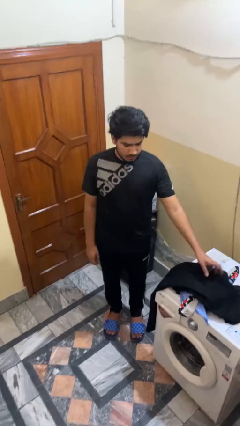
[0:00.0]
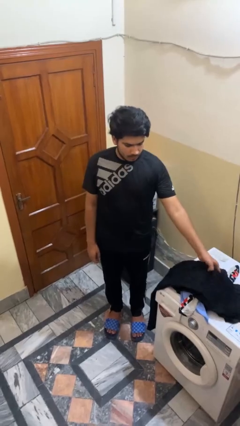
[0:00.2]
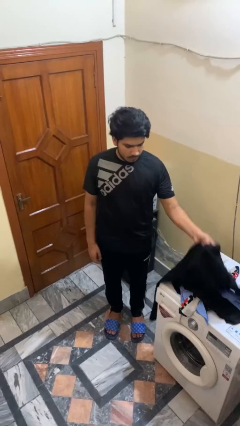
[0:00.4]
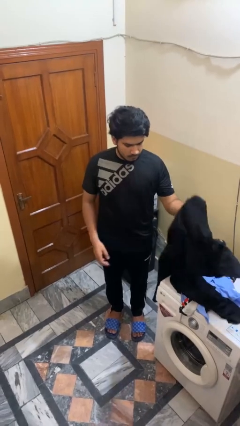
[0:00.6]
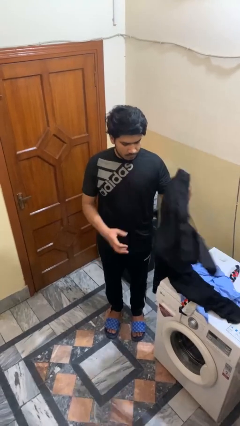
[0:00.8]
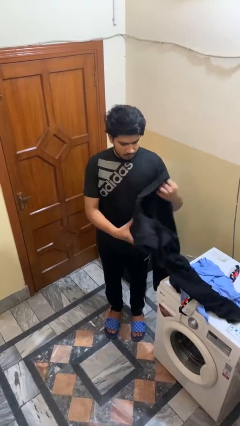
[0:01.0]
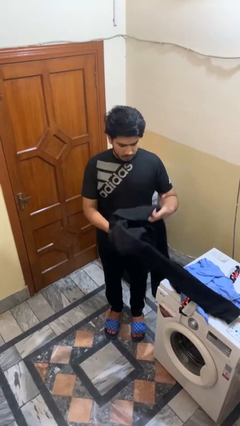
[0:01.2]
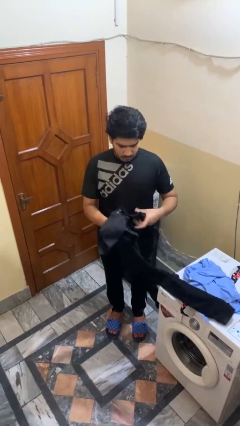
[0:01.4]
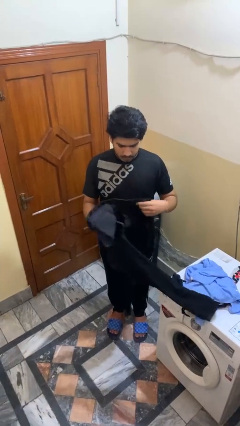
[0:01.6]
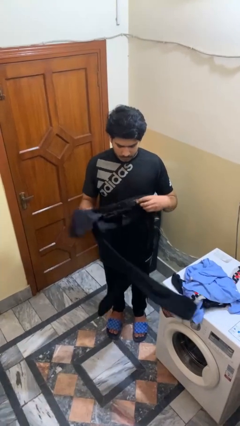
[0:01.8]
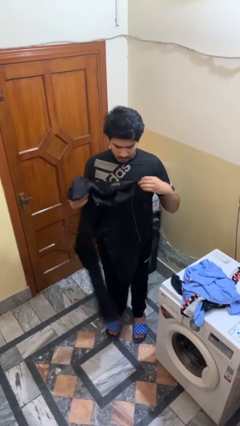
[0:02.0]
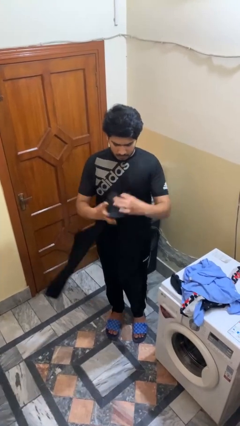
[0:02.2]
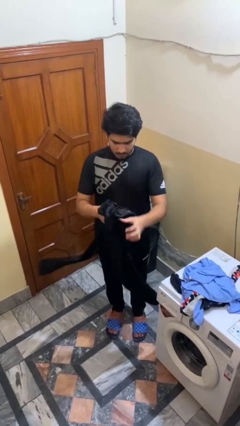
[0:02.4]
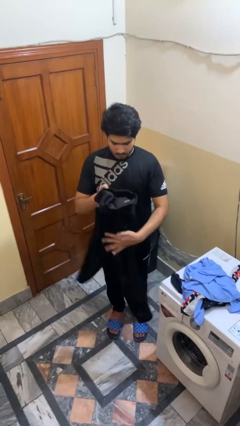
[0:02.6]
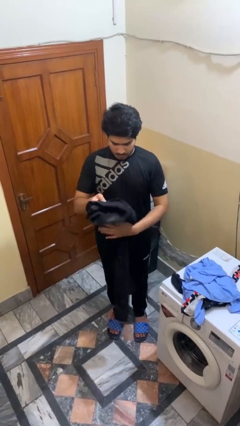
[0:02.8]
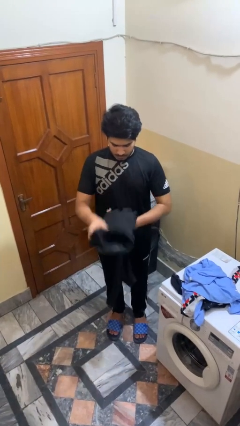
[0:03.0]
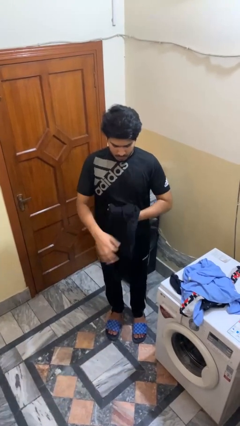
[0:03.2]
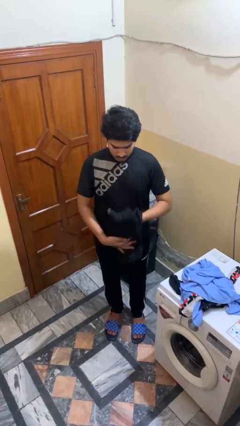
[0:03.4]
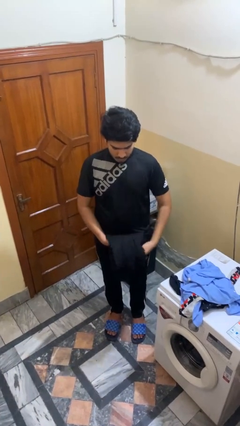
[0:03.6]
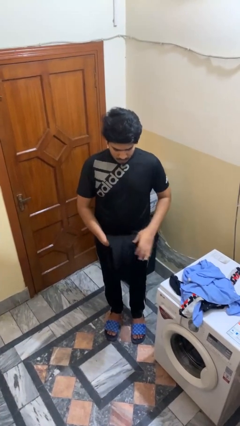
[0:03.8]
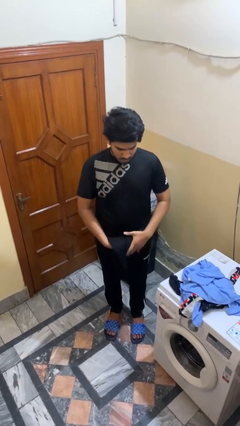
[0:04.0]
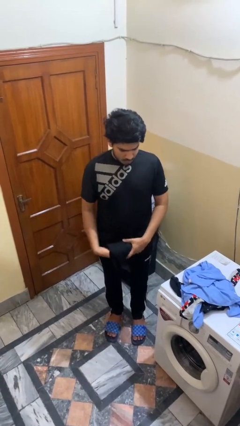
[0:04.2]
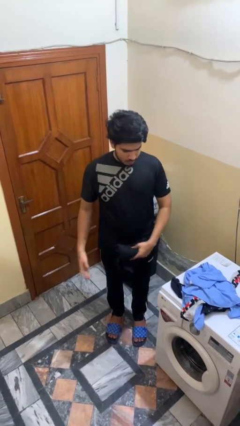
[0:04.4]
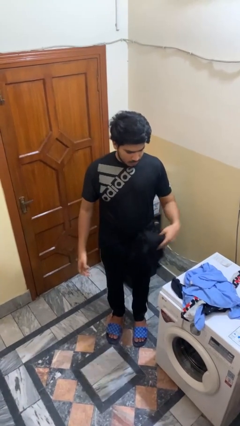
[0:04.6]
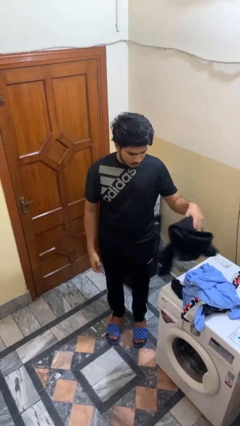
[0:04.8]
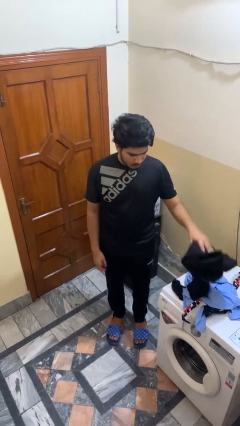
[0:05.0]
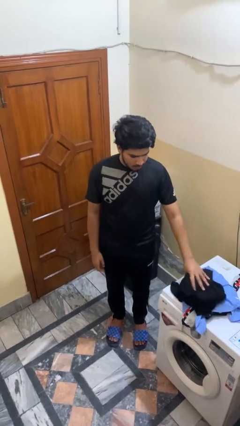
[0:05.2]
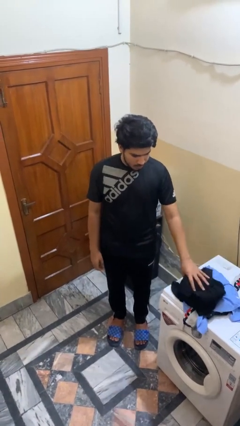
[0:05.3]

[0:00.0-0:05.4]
person folds pants

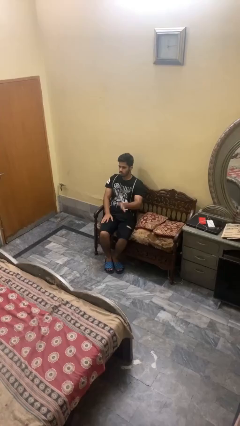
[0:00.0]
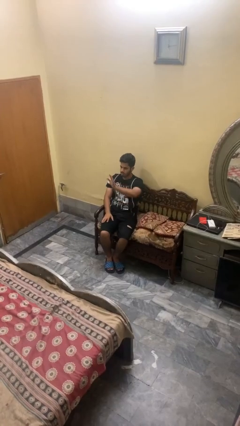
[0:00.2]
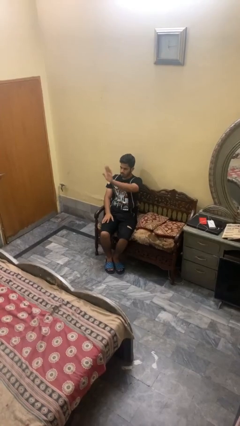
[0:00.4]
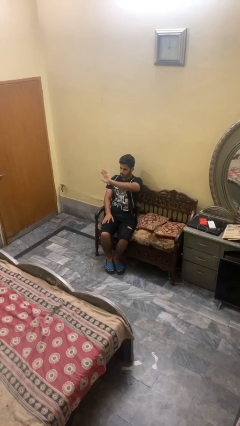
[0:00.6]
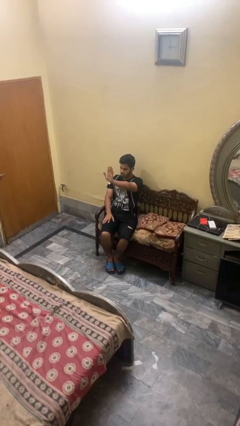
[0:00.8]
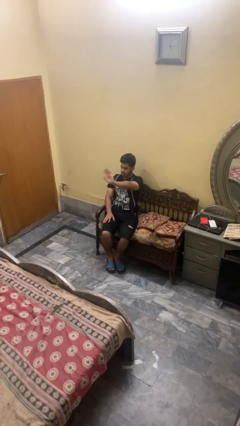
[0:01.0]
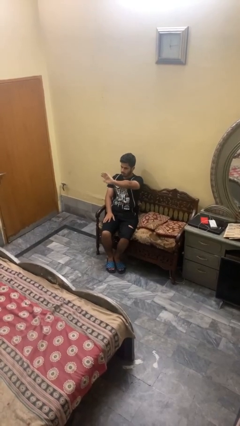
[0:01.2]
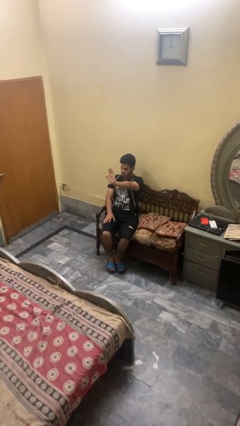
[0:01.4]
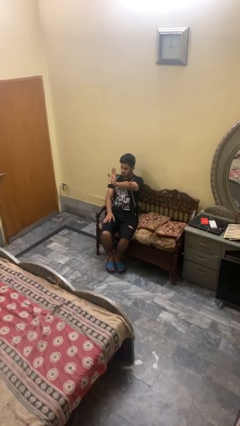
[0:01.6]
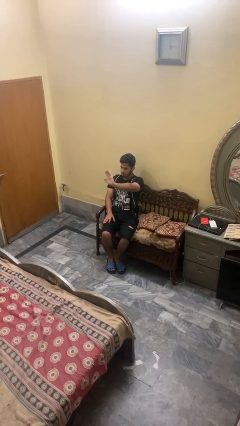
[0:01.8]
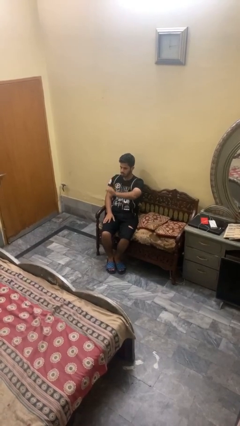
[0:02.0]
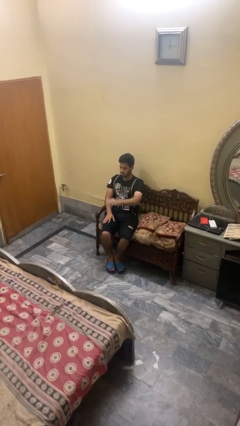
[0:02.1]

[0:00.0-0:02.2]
person waves at person

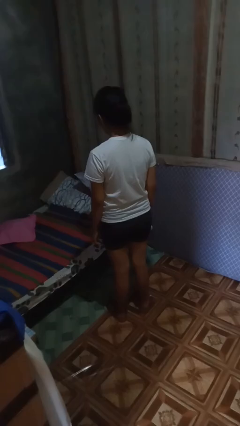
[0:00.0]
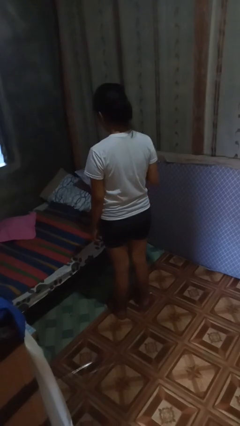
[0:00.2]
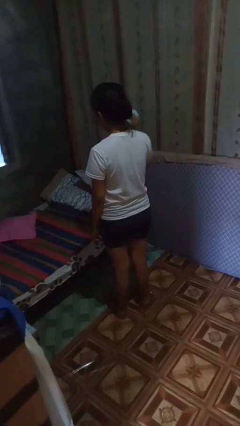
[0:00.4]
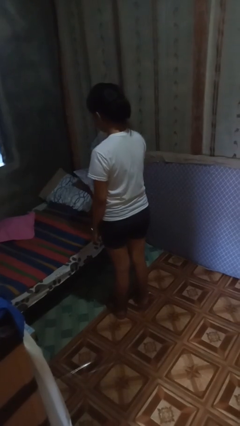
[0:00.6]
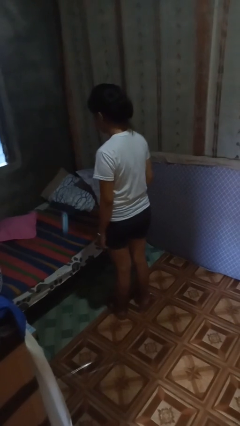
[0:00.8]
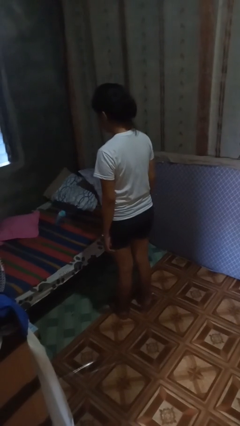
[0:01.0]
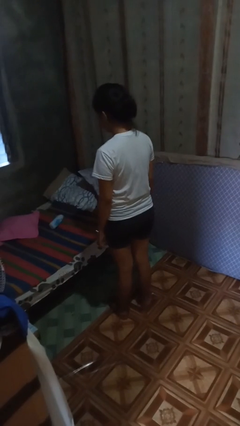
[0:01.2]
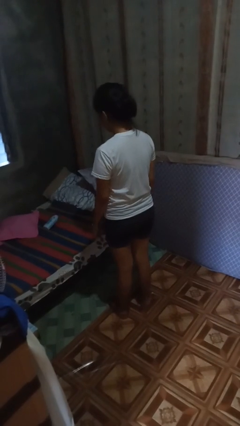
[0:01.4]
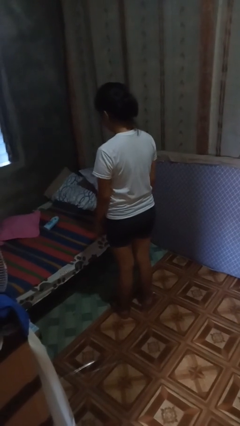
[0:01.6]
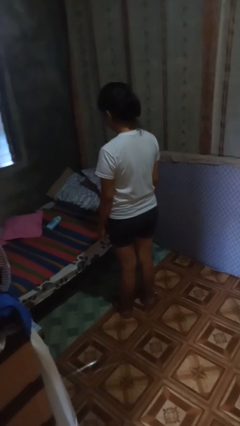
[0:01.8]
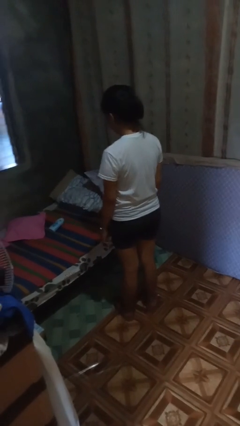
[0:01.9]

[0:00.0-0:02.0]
person throws object on bed

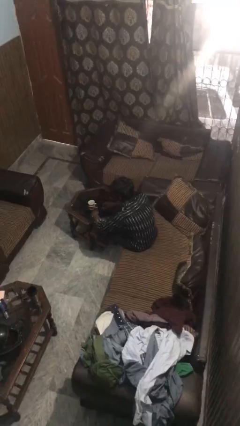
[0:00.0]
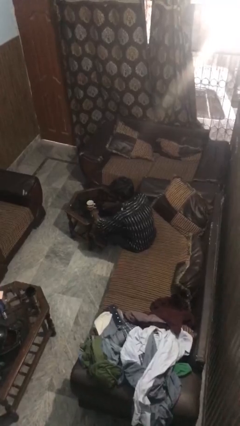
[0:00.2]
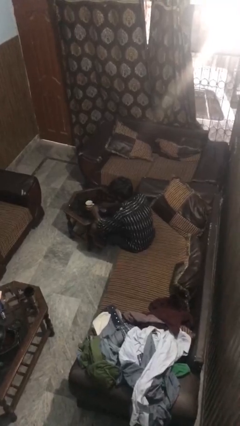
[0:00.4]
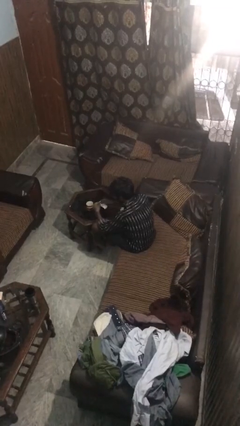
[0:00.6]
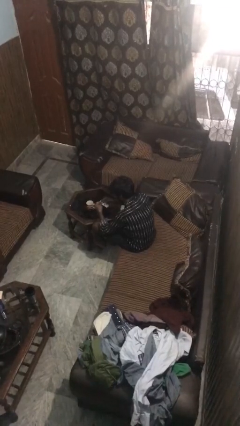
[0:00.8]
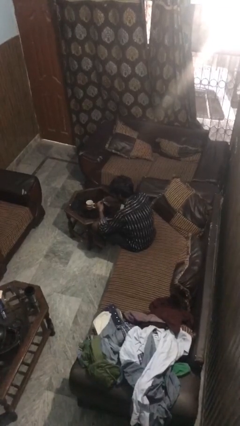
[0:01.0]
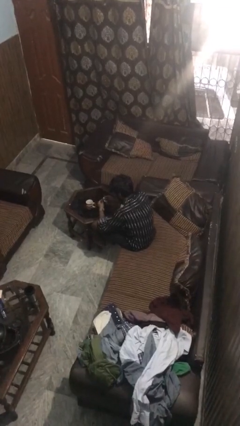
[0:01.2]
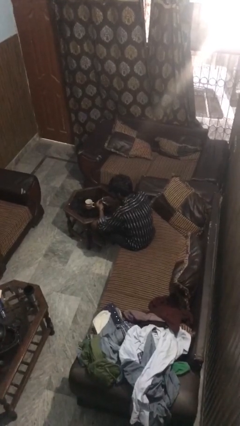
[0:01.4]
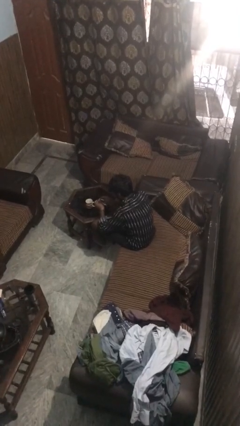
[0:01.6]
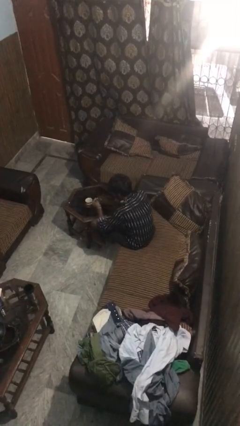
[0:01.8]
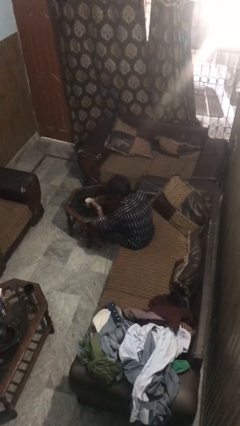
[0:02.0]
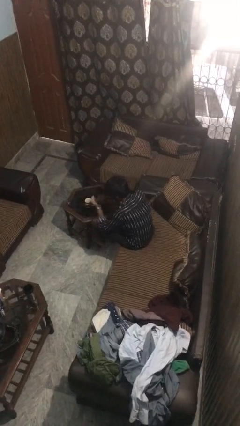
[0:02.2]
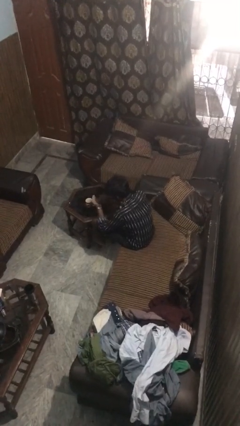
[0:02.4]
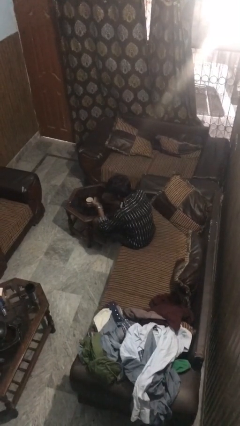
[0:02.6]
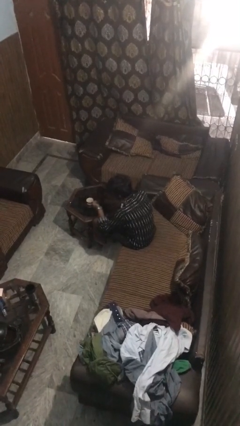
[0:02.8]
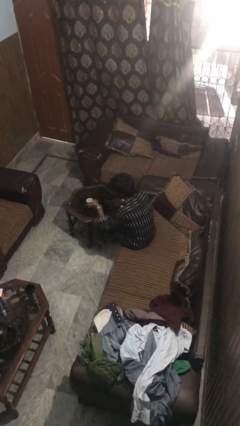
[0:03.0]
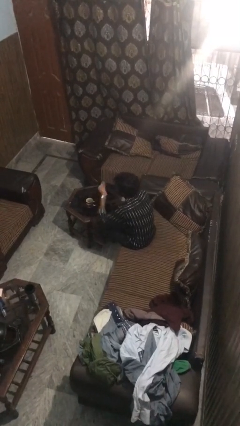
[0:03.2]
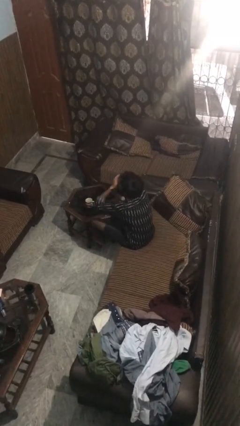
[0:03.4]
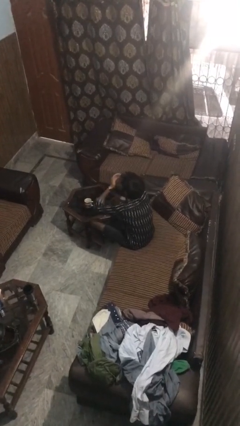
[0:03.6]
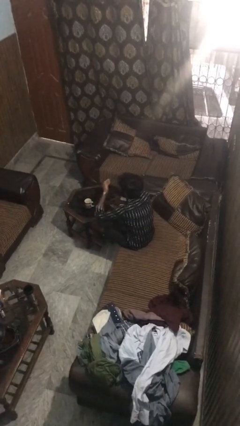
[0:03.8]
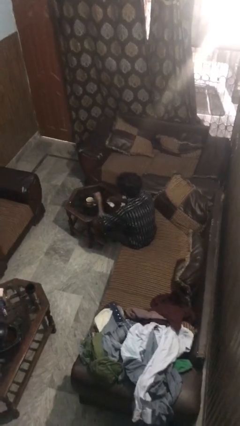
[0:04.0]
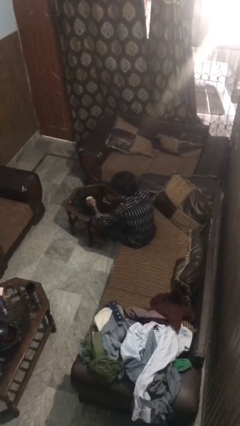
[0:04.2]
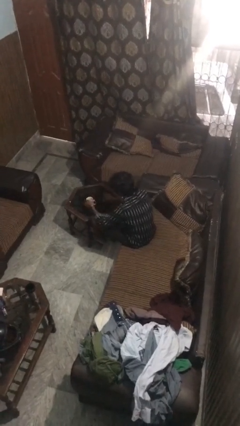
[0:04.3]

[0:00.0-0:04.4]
person takes medicine pills

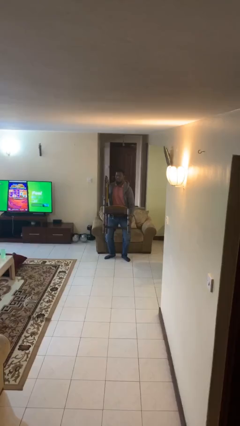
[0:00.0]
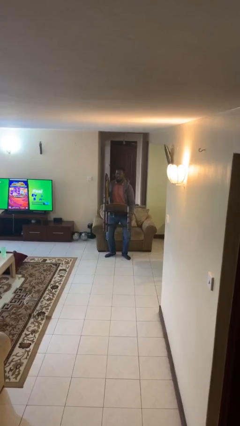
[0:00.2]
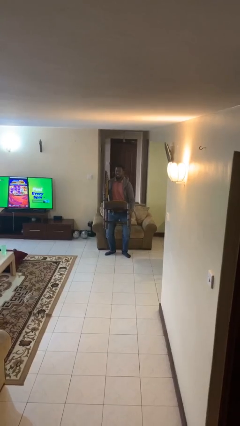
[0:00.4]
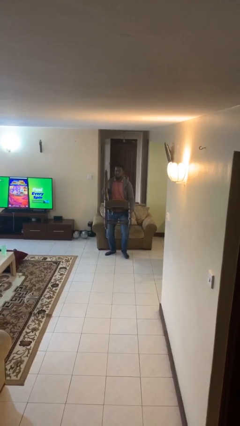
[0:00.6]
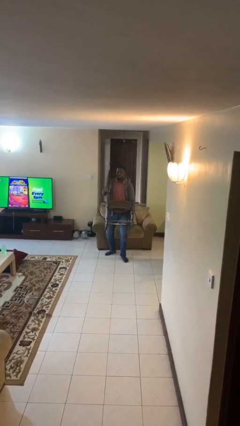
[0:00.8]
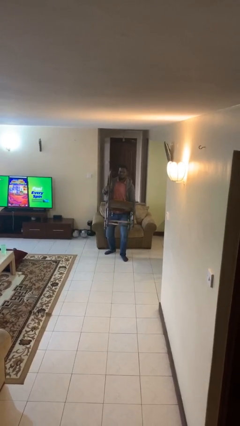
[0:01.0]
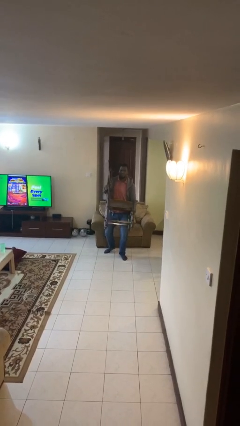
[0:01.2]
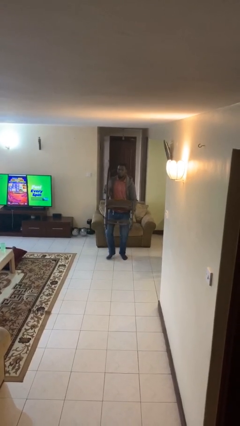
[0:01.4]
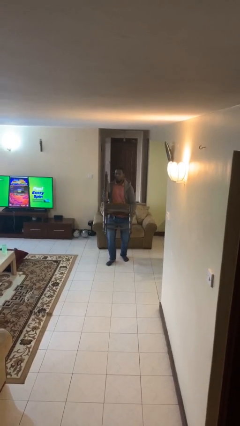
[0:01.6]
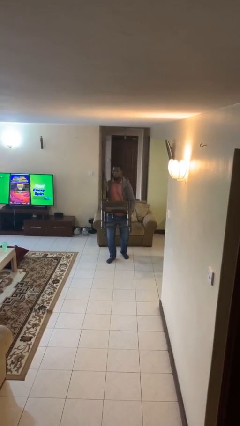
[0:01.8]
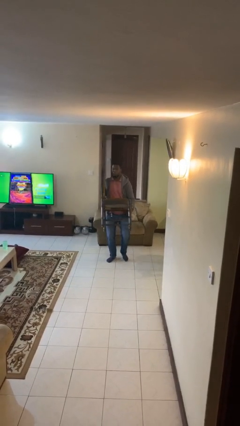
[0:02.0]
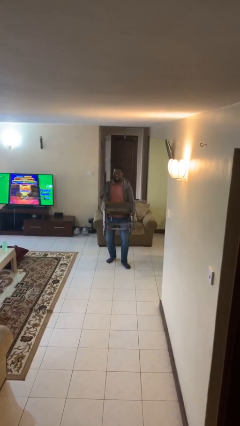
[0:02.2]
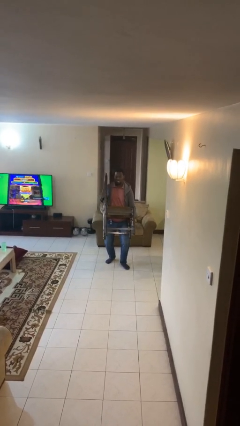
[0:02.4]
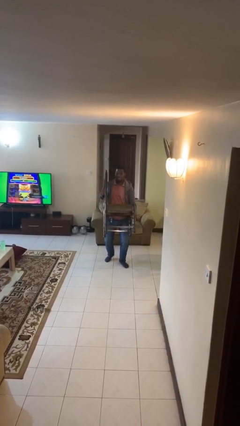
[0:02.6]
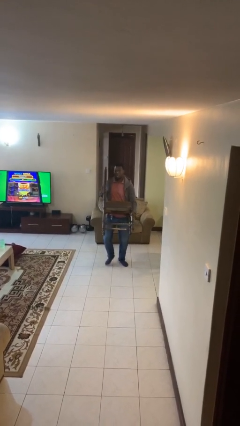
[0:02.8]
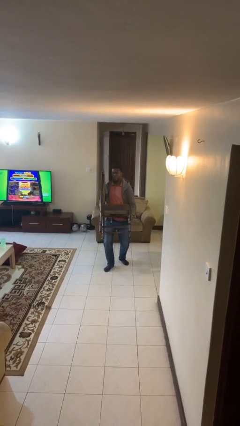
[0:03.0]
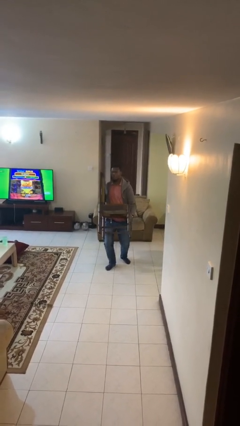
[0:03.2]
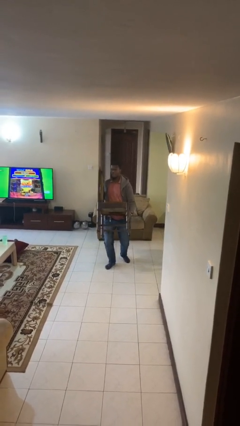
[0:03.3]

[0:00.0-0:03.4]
person carries heavy object
